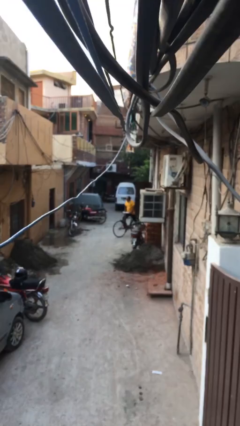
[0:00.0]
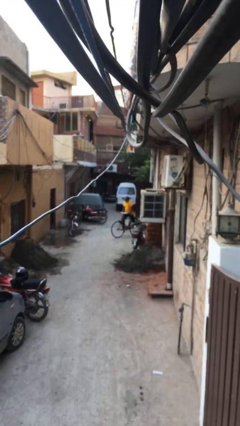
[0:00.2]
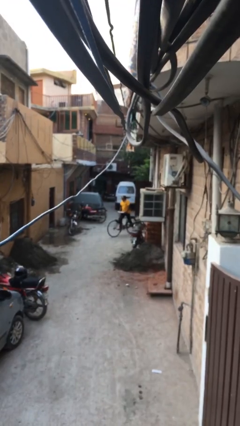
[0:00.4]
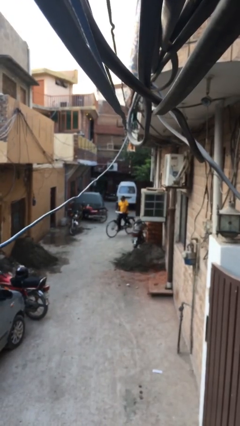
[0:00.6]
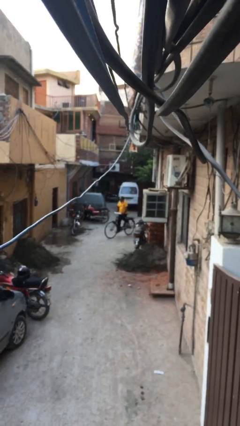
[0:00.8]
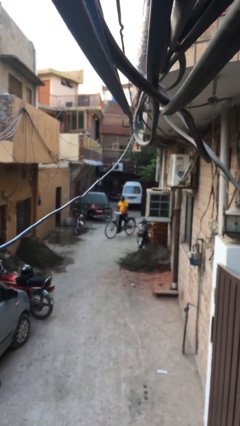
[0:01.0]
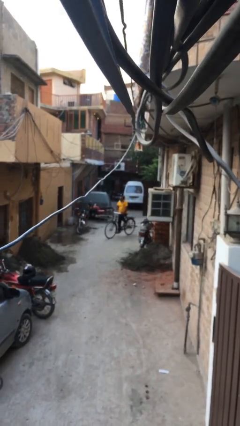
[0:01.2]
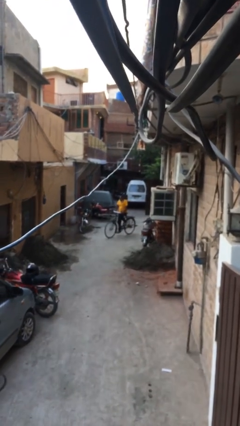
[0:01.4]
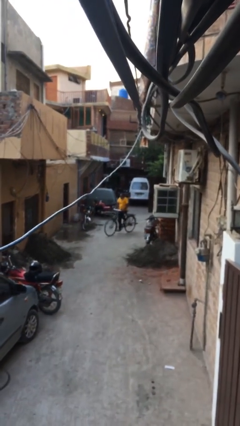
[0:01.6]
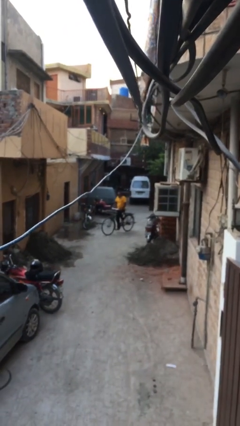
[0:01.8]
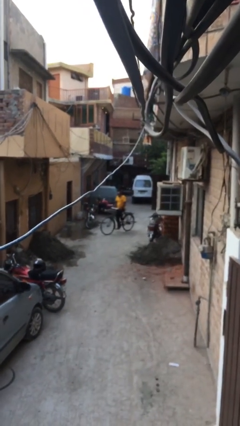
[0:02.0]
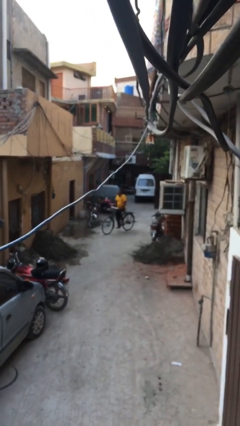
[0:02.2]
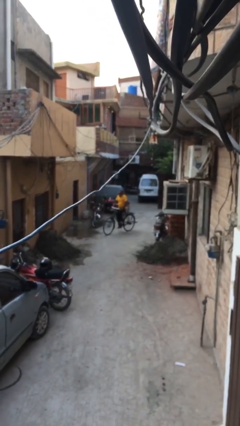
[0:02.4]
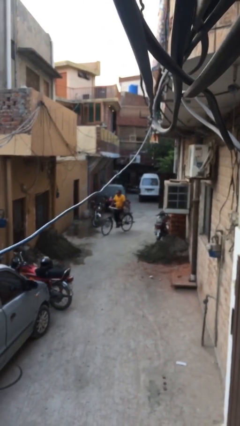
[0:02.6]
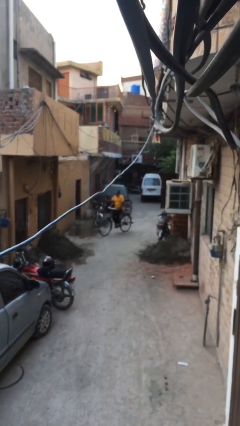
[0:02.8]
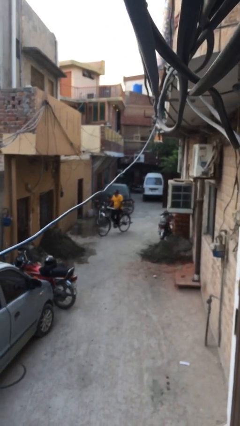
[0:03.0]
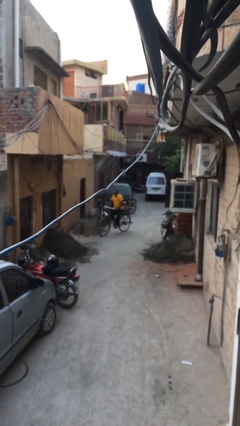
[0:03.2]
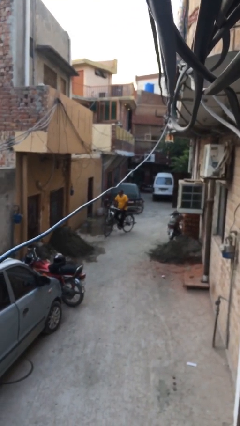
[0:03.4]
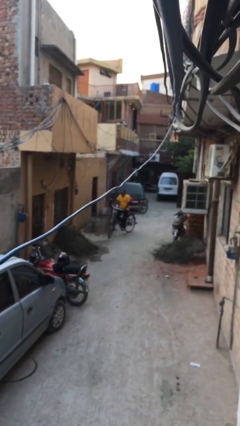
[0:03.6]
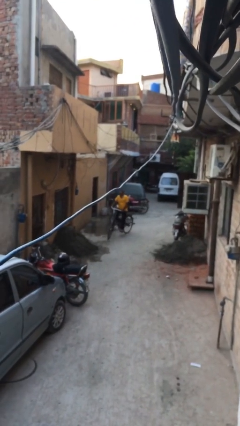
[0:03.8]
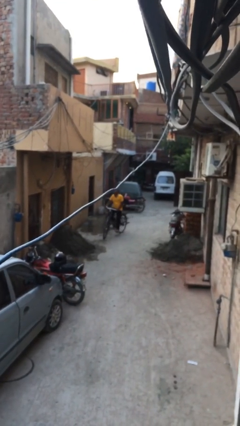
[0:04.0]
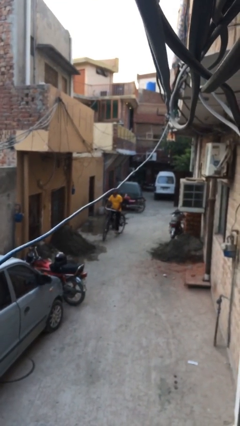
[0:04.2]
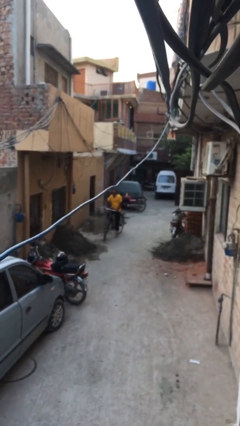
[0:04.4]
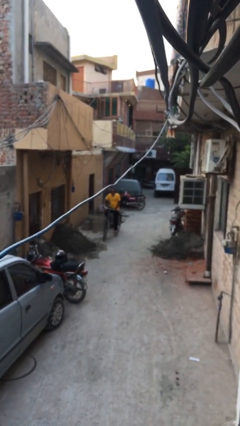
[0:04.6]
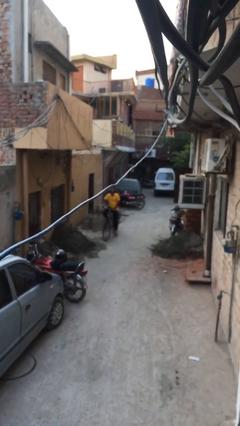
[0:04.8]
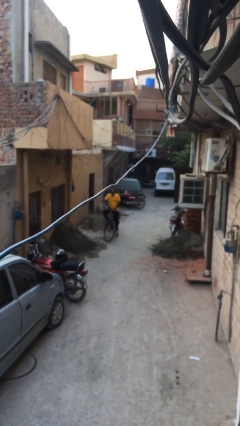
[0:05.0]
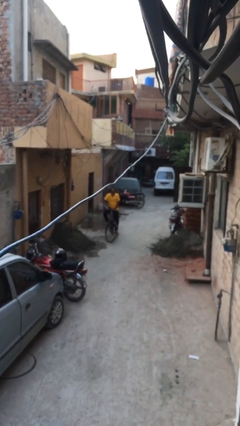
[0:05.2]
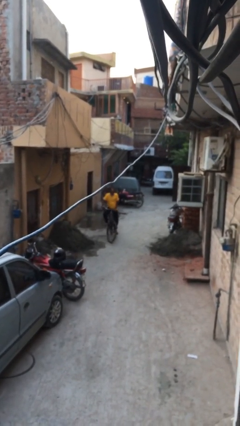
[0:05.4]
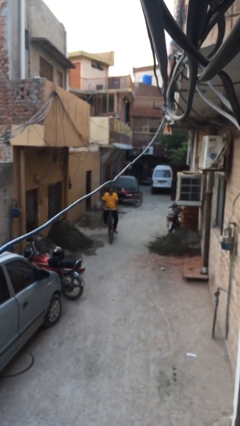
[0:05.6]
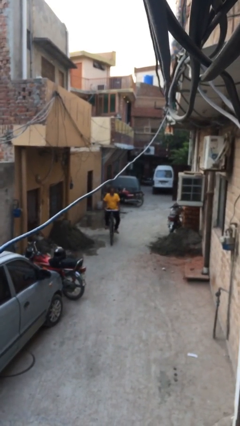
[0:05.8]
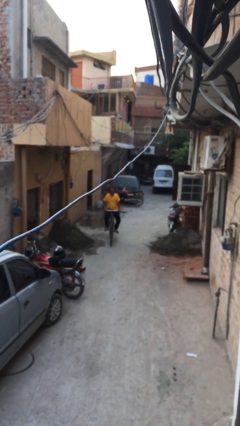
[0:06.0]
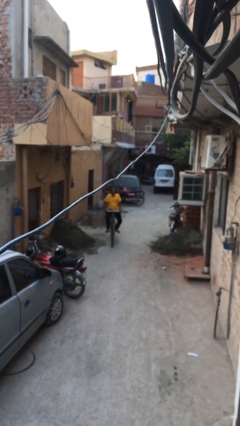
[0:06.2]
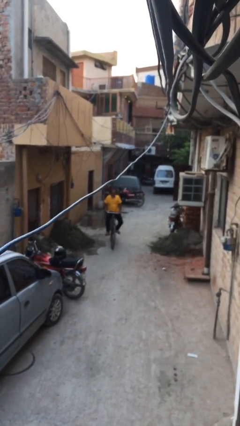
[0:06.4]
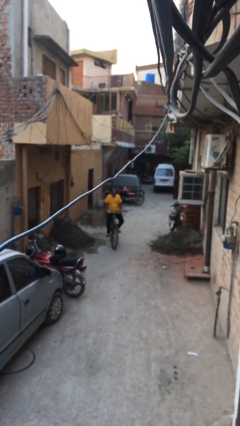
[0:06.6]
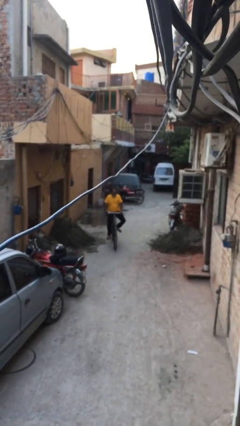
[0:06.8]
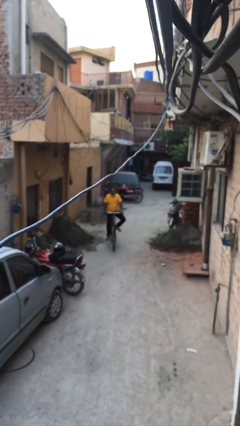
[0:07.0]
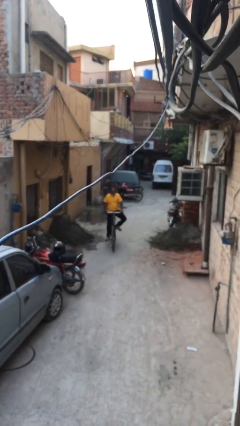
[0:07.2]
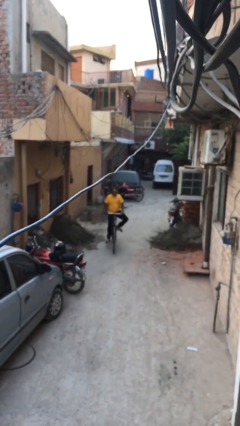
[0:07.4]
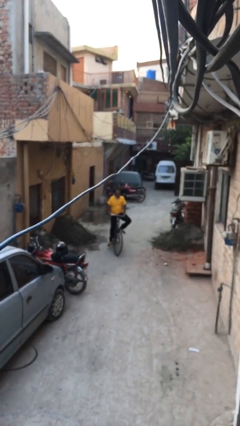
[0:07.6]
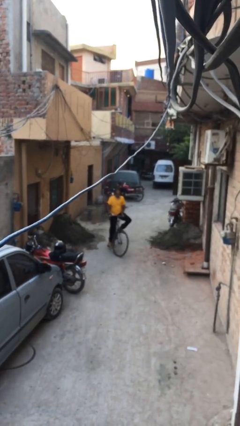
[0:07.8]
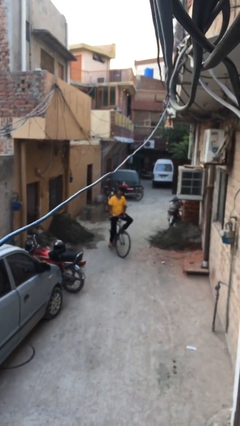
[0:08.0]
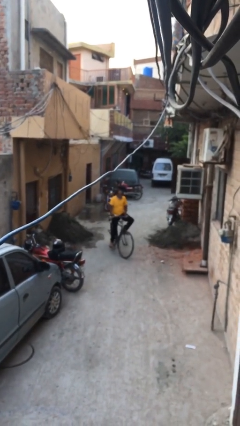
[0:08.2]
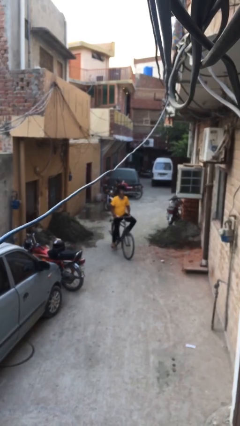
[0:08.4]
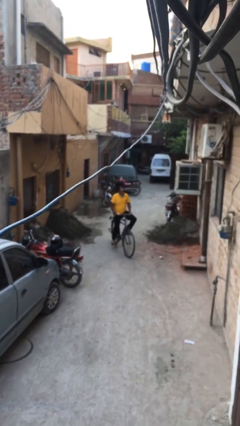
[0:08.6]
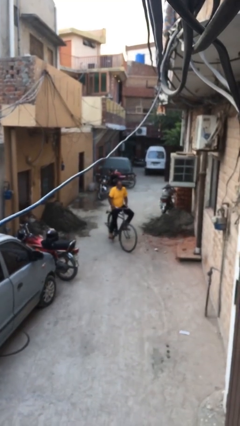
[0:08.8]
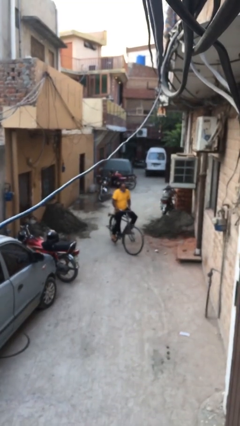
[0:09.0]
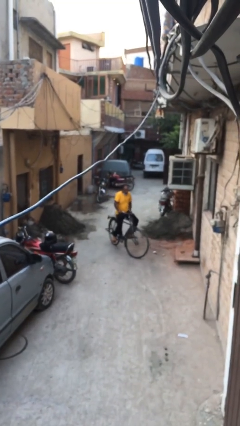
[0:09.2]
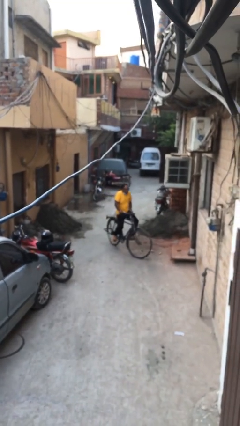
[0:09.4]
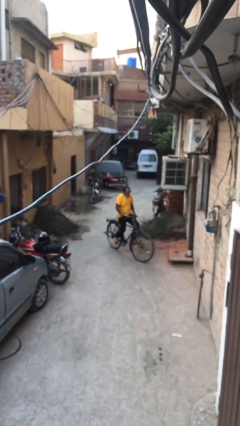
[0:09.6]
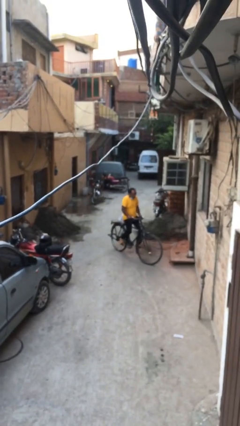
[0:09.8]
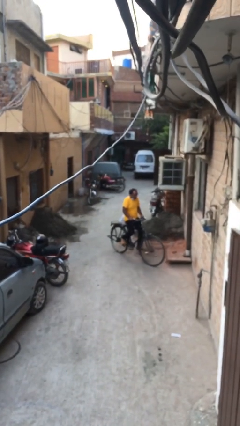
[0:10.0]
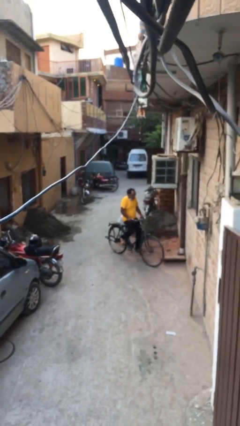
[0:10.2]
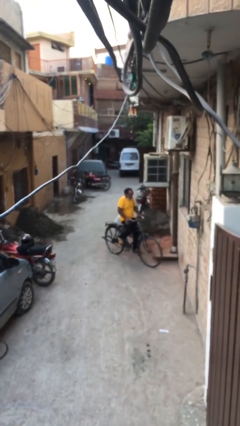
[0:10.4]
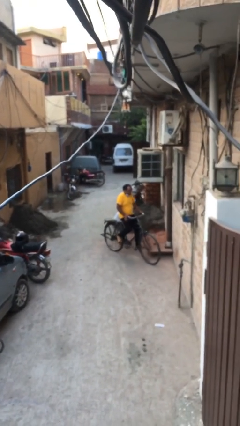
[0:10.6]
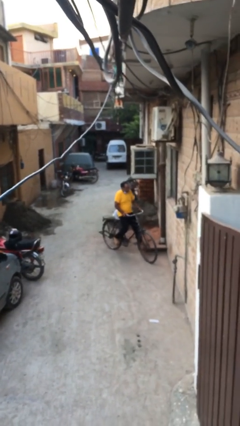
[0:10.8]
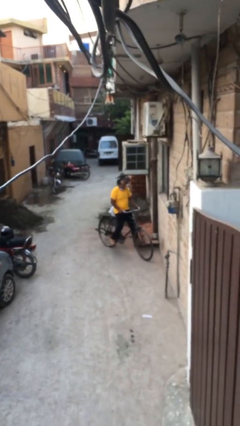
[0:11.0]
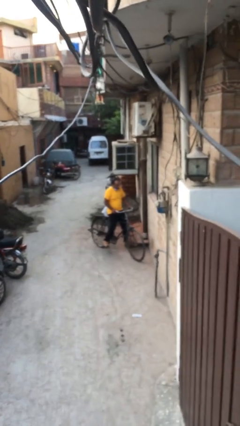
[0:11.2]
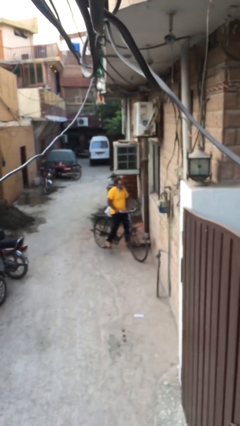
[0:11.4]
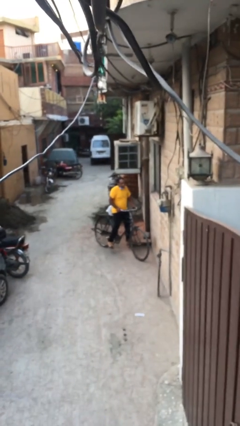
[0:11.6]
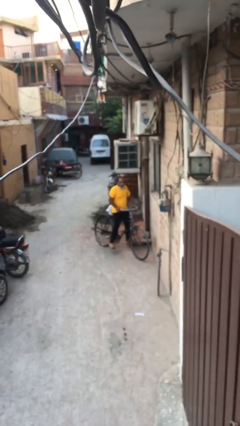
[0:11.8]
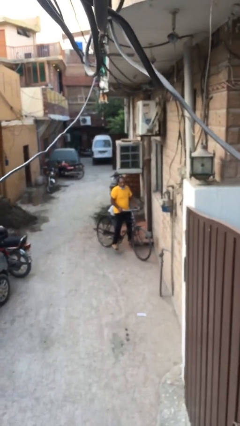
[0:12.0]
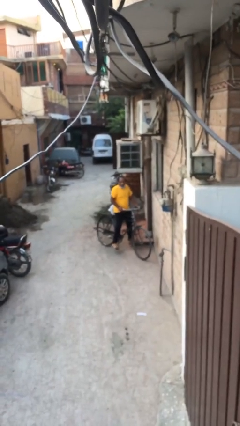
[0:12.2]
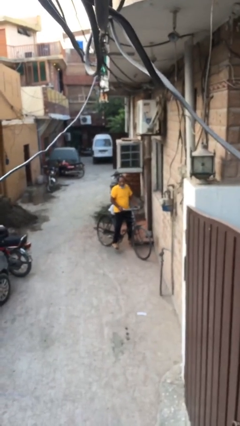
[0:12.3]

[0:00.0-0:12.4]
person rides bicycle

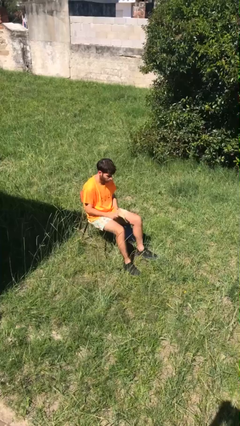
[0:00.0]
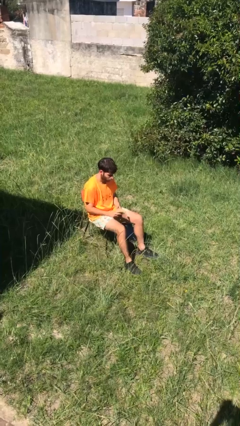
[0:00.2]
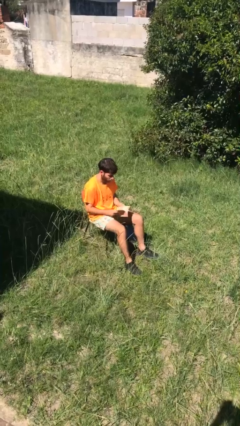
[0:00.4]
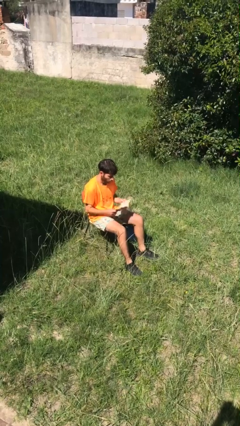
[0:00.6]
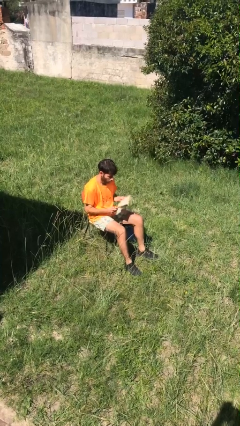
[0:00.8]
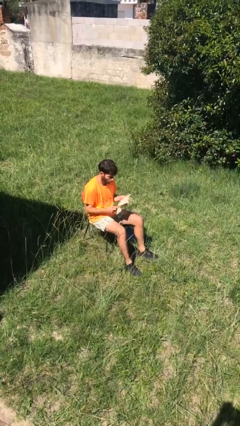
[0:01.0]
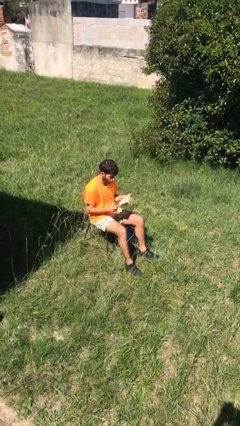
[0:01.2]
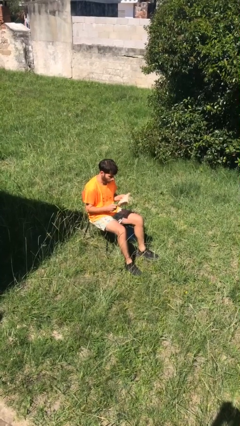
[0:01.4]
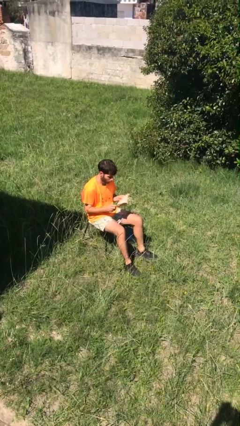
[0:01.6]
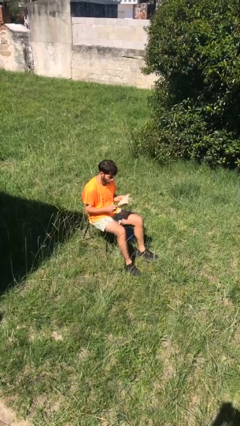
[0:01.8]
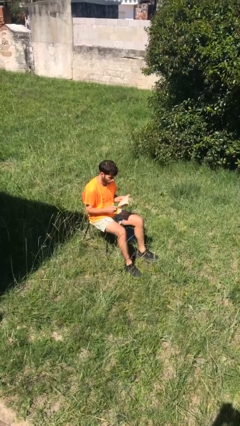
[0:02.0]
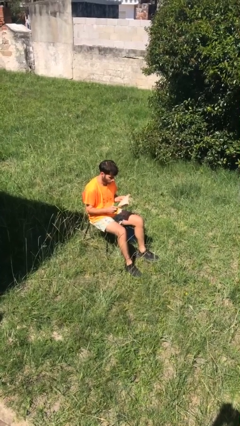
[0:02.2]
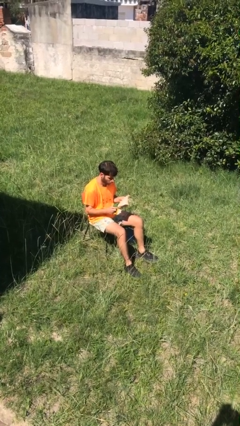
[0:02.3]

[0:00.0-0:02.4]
person reads document

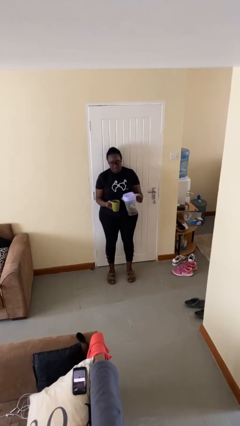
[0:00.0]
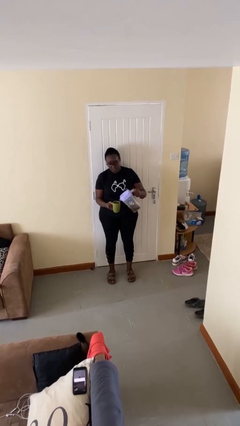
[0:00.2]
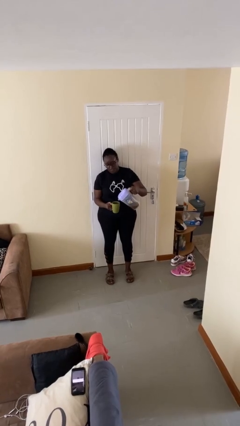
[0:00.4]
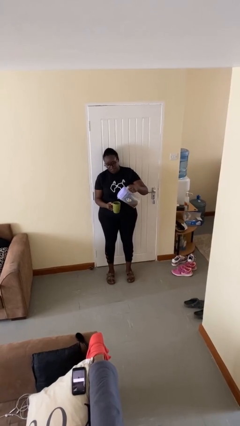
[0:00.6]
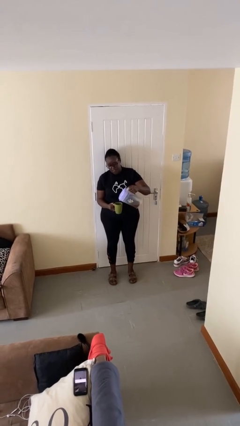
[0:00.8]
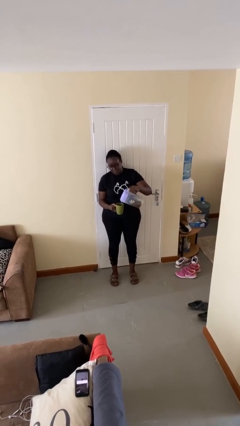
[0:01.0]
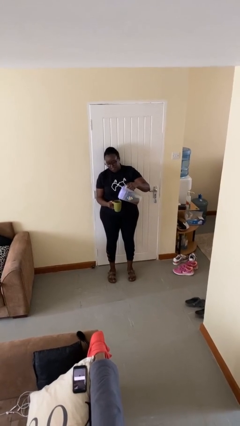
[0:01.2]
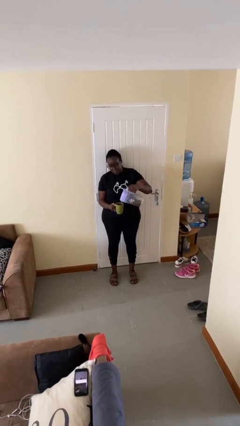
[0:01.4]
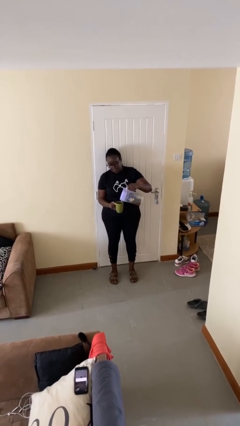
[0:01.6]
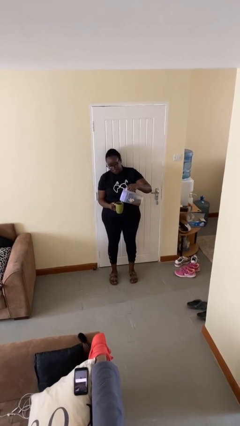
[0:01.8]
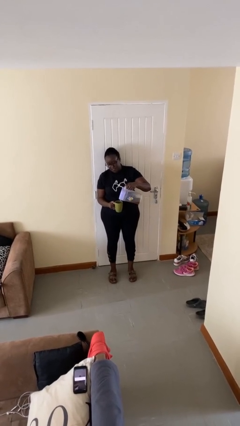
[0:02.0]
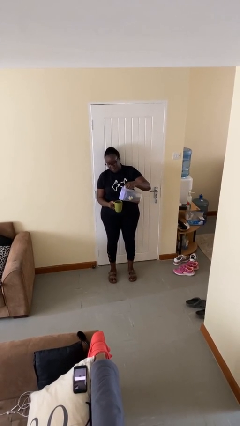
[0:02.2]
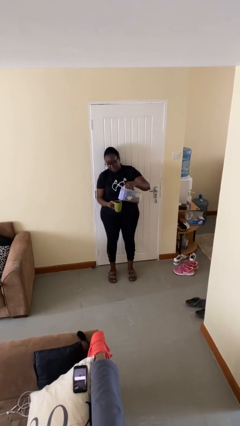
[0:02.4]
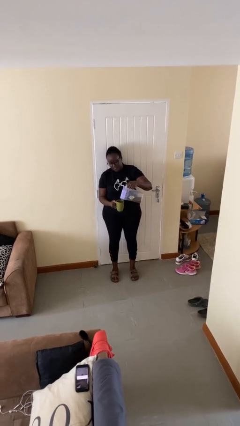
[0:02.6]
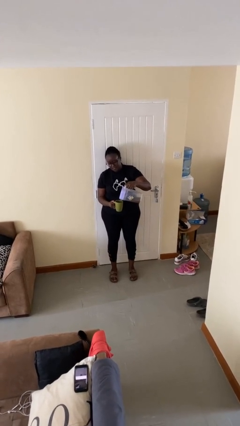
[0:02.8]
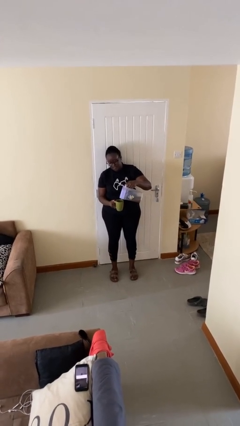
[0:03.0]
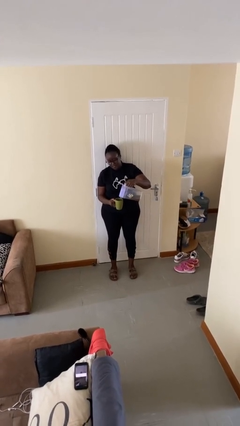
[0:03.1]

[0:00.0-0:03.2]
person pours coffee into mug
